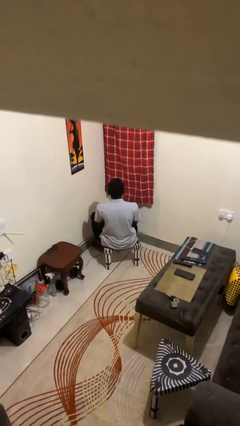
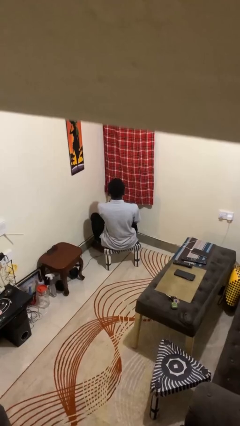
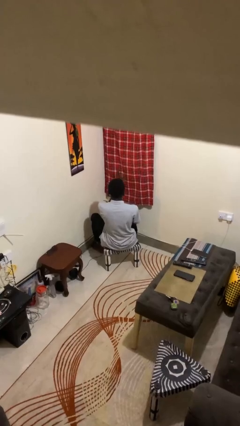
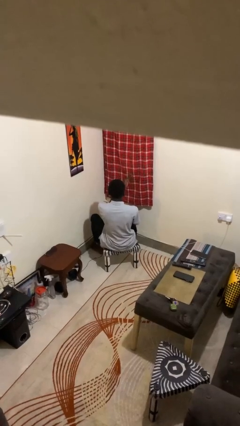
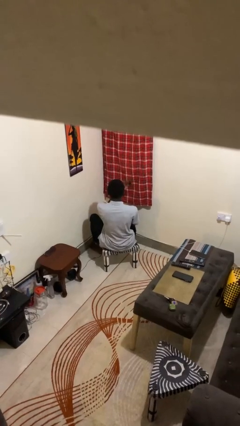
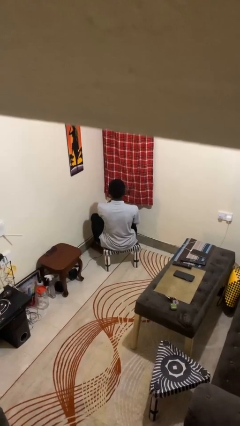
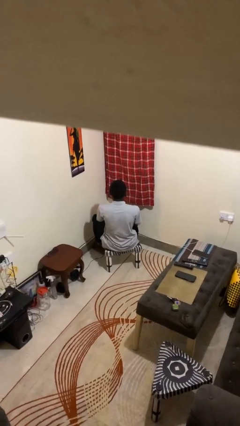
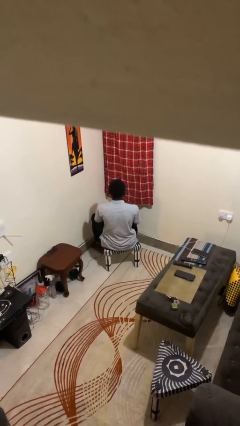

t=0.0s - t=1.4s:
person gestures swipe right

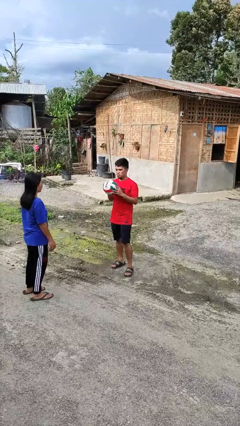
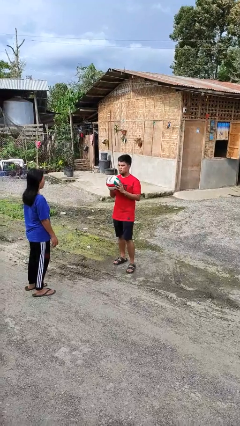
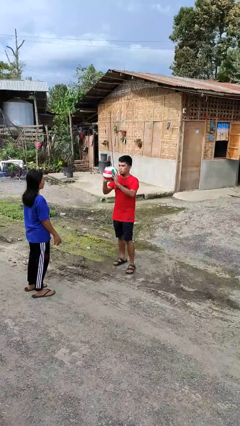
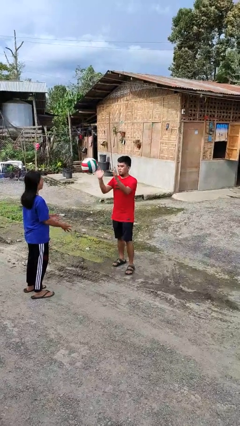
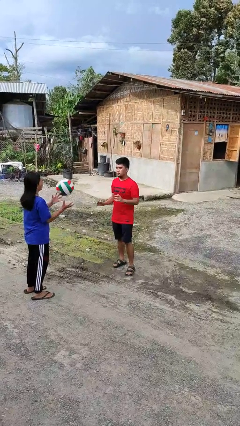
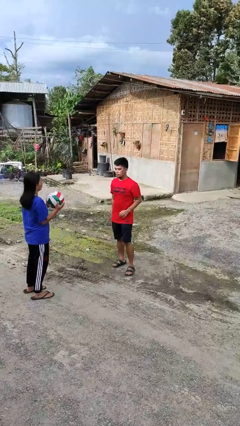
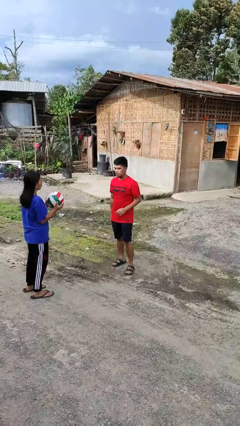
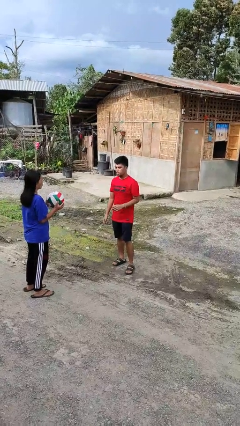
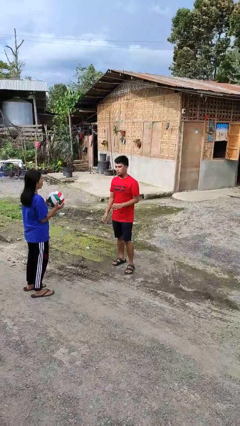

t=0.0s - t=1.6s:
person throws object to person

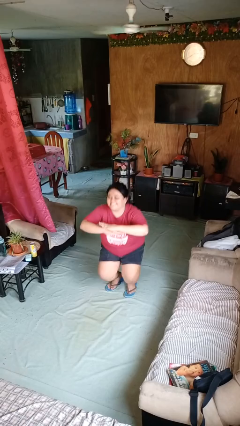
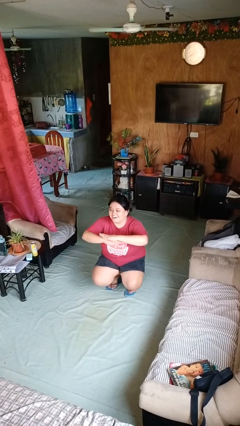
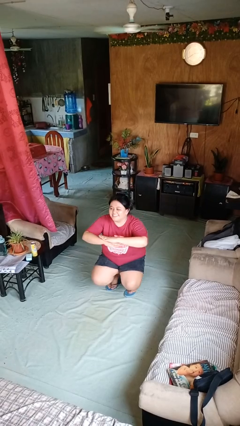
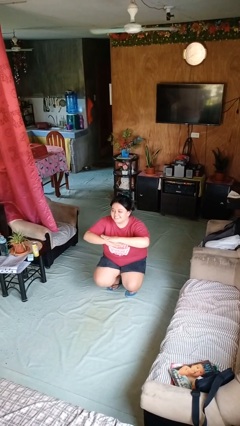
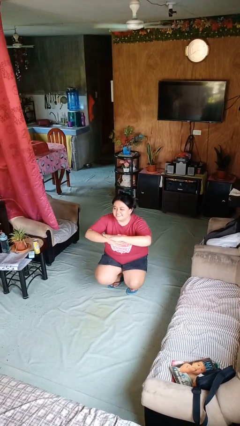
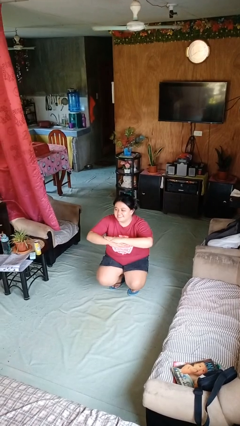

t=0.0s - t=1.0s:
person squats

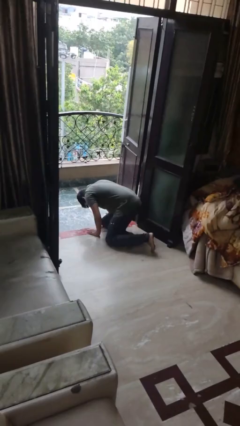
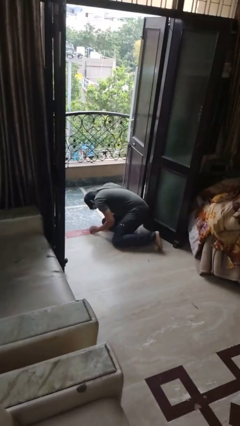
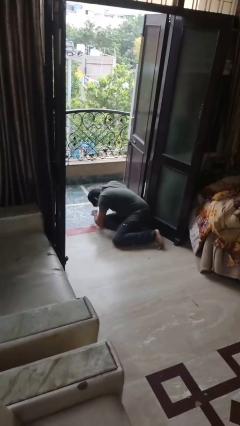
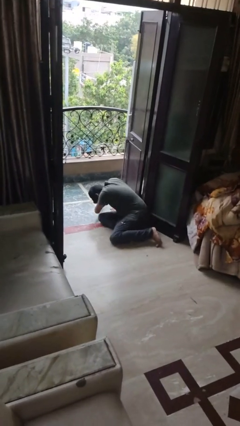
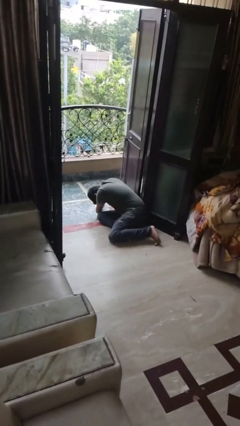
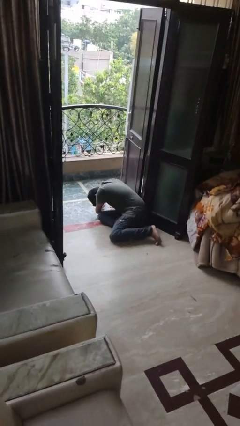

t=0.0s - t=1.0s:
person lies down on floor

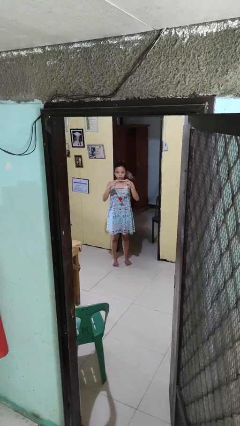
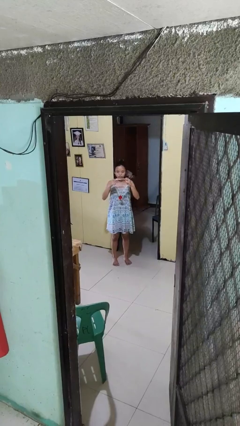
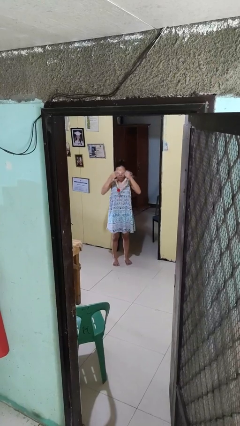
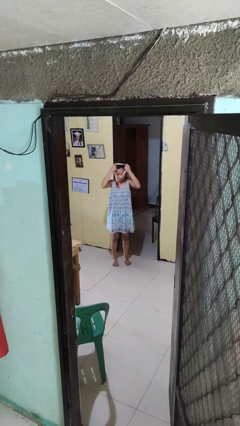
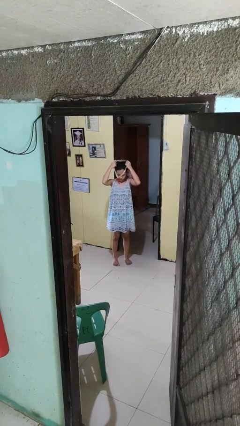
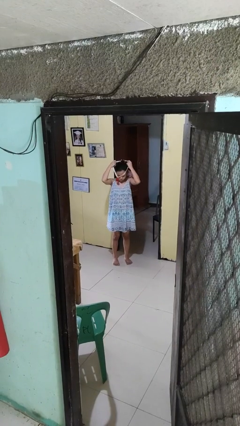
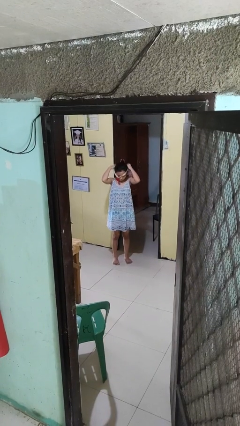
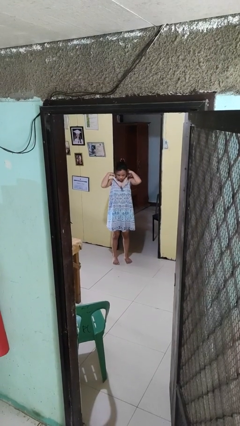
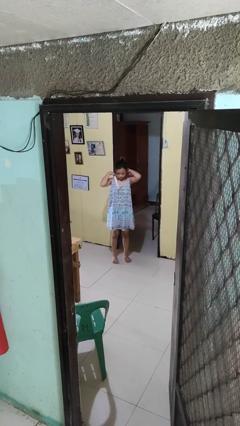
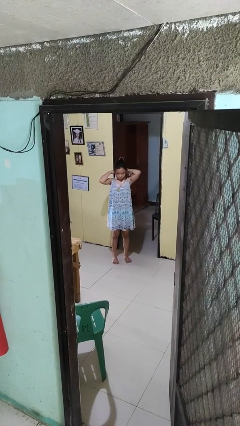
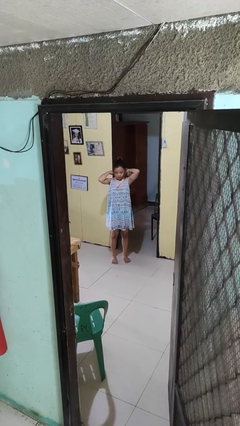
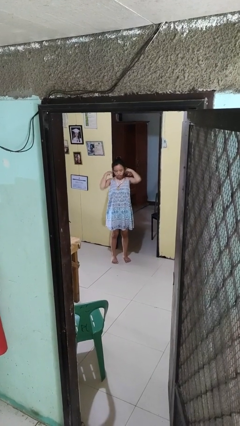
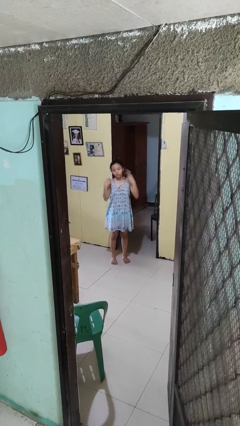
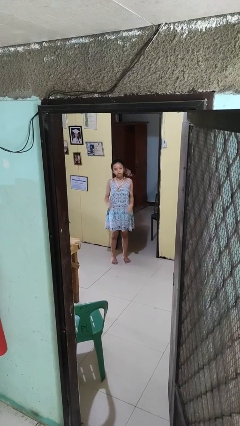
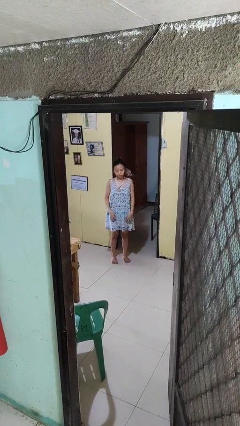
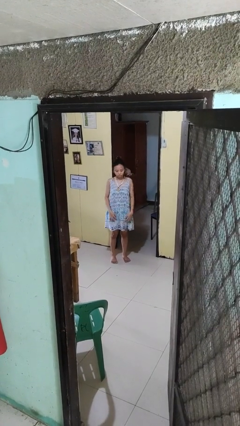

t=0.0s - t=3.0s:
person puts on necklace

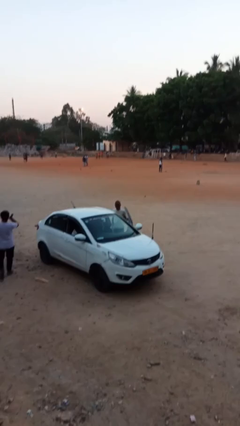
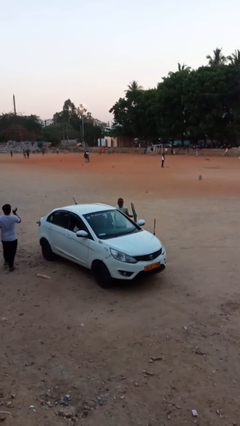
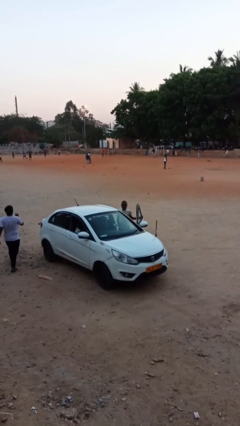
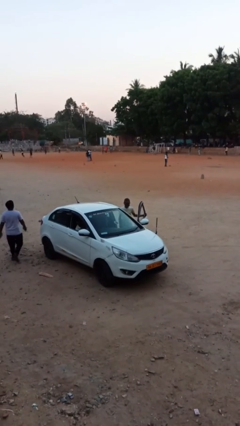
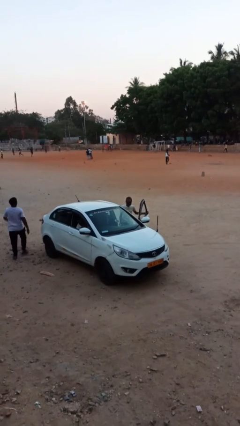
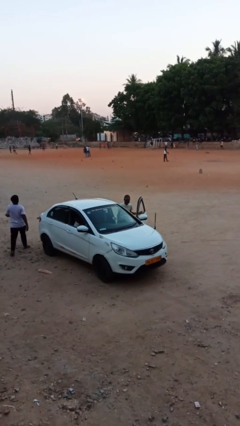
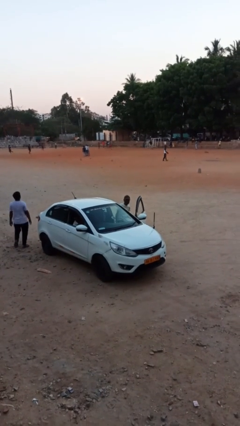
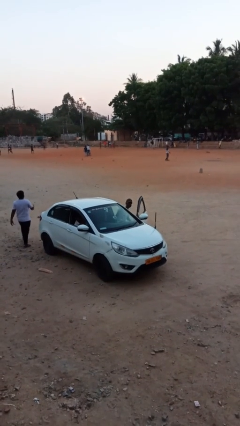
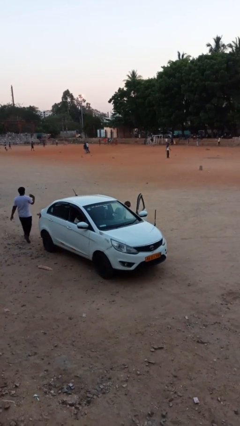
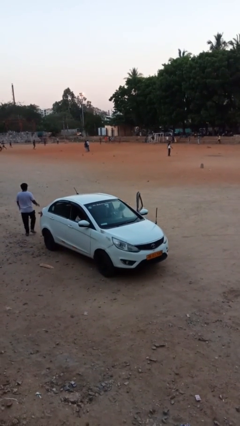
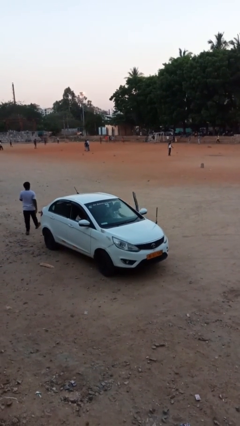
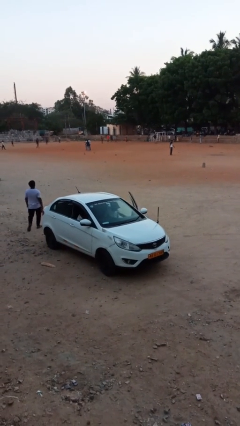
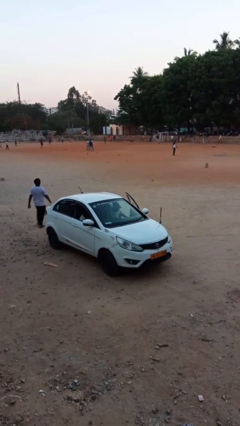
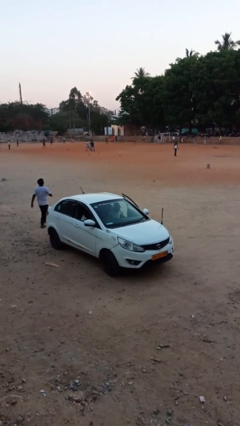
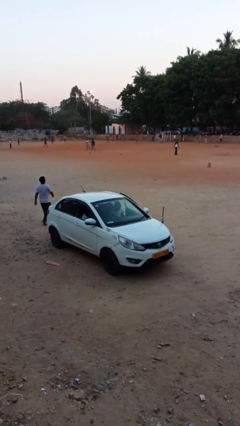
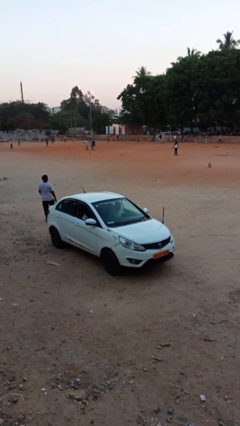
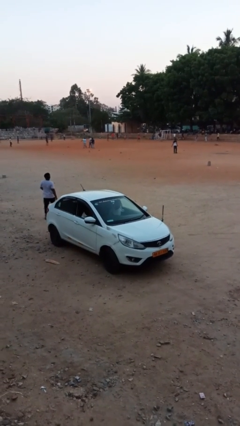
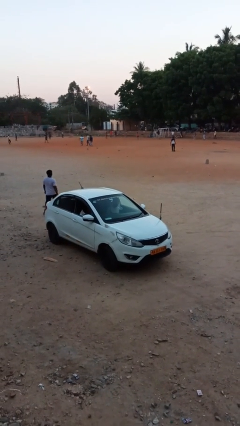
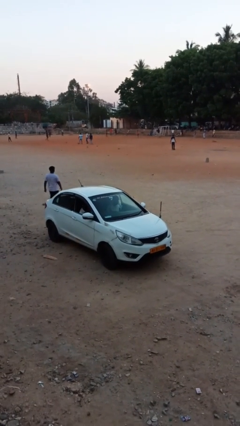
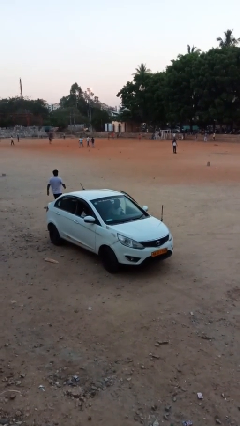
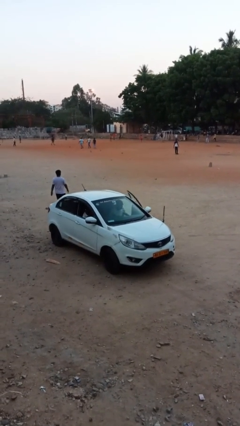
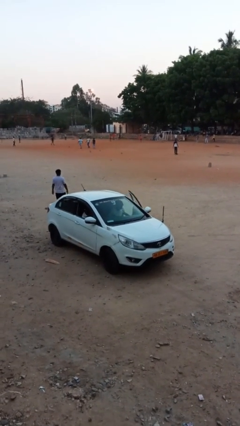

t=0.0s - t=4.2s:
person enters car

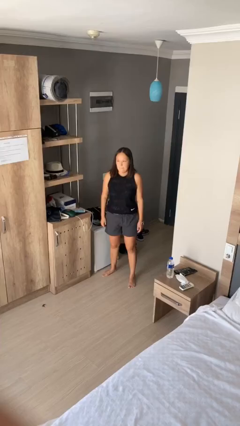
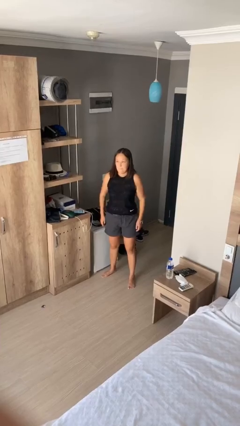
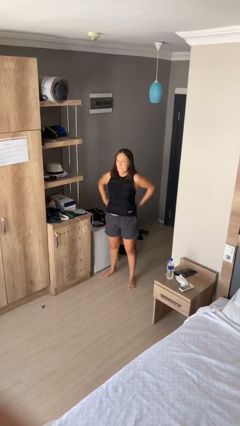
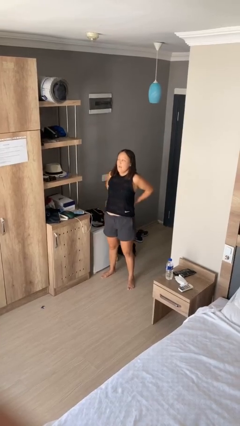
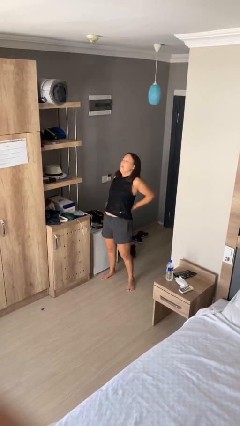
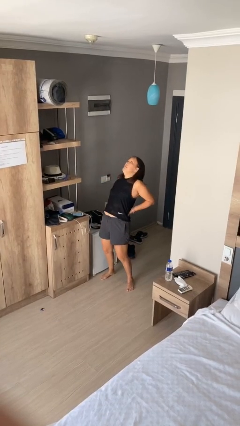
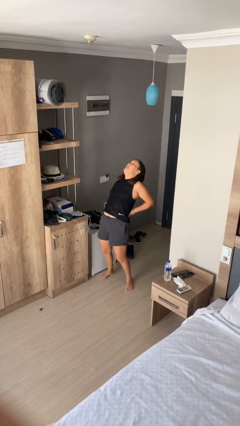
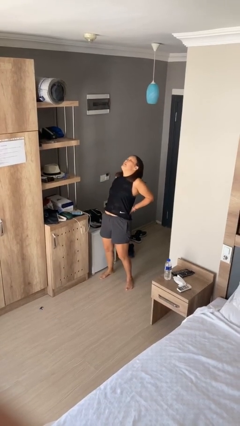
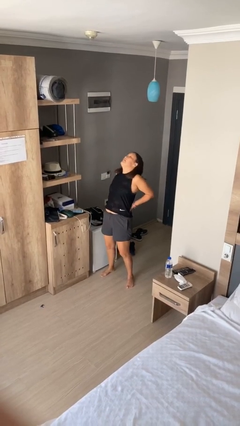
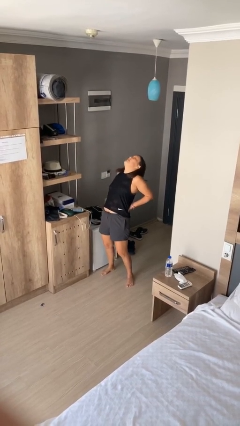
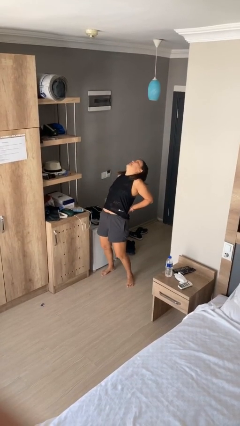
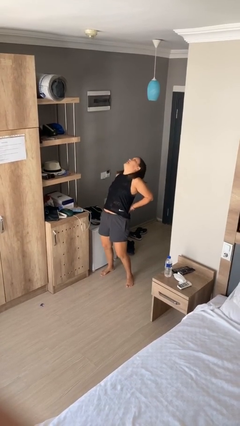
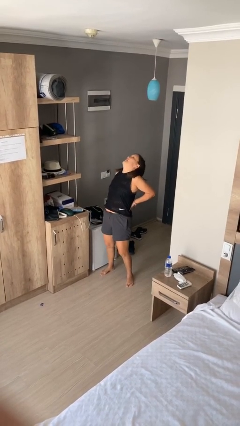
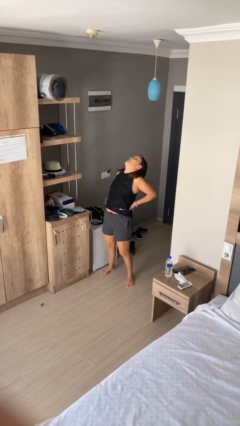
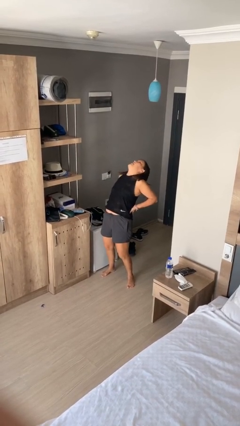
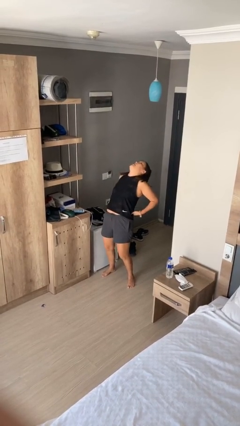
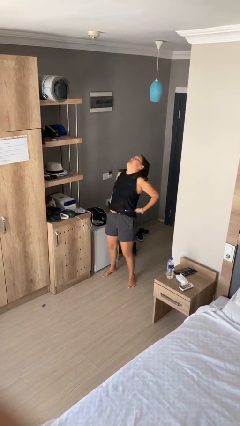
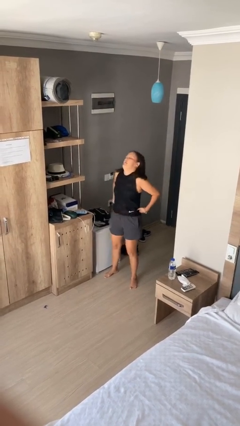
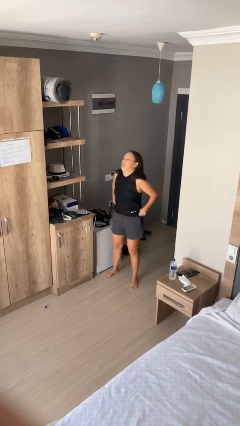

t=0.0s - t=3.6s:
person stretches back

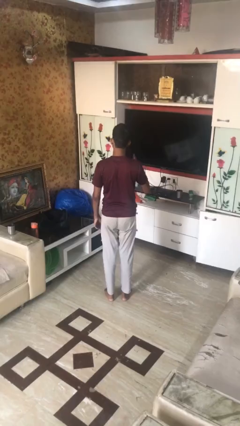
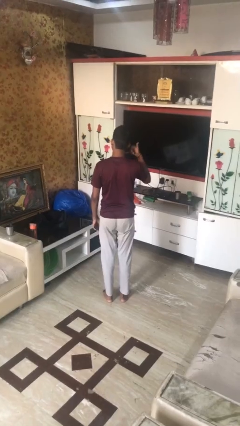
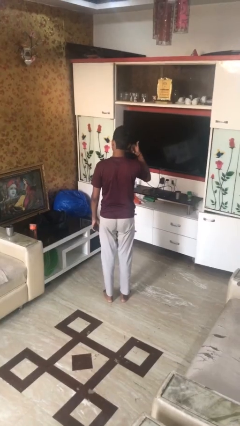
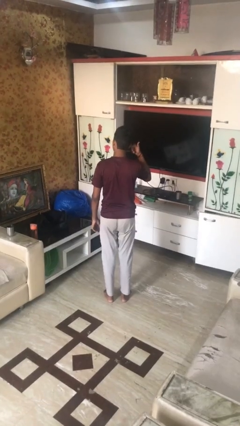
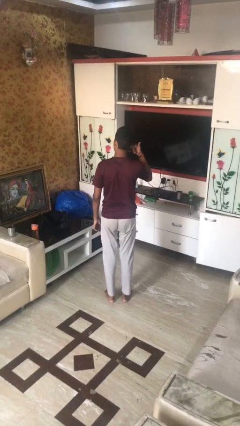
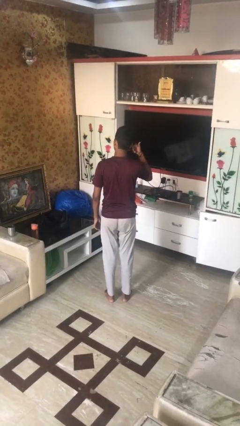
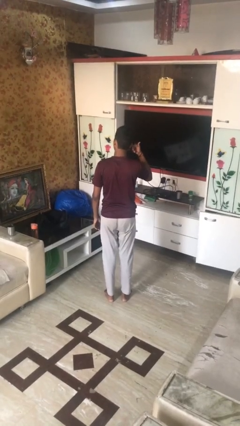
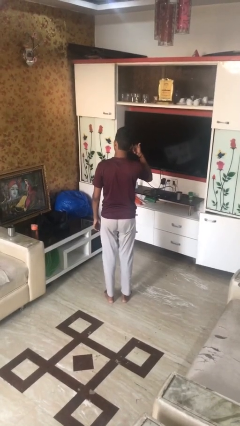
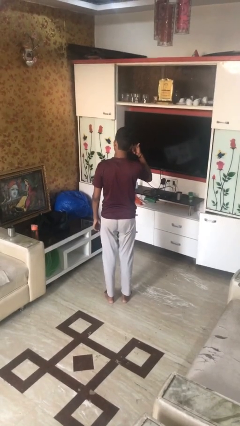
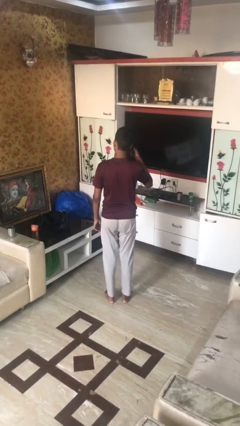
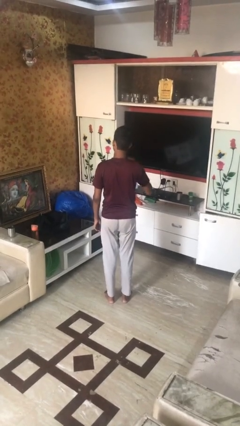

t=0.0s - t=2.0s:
person gestures call me
